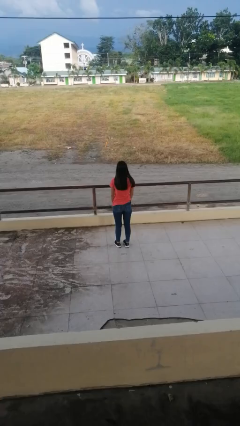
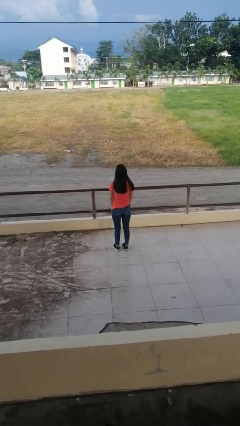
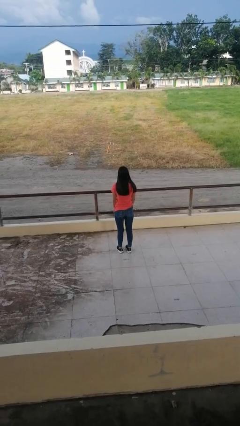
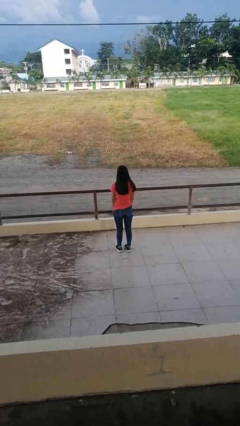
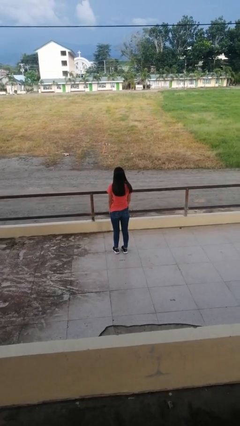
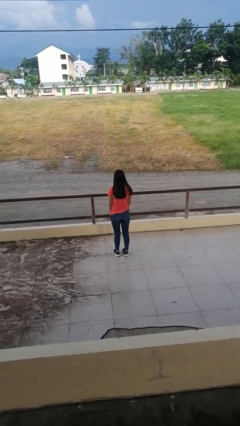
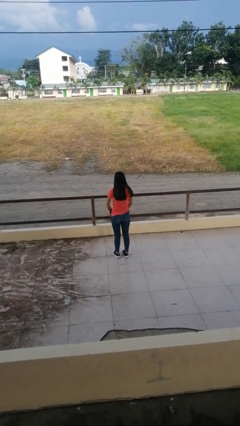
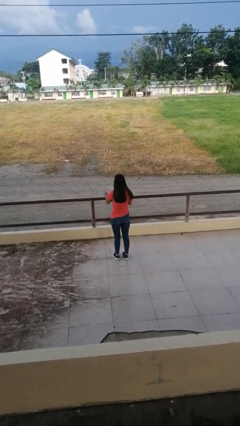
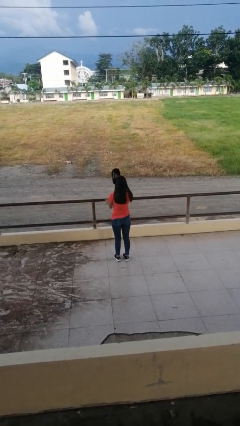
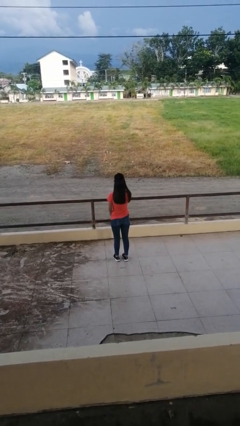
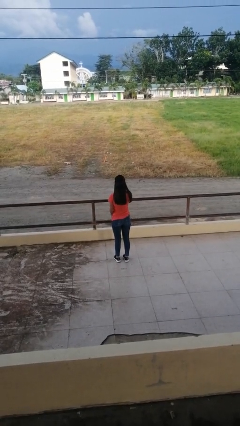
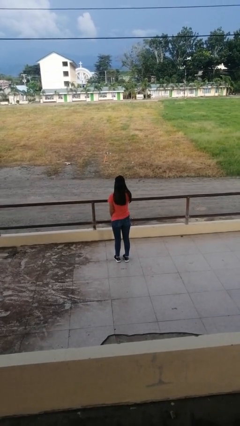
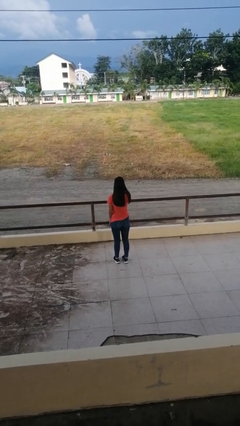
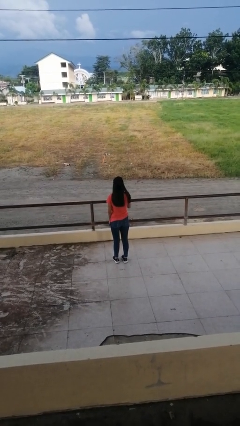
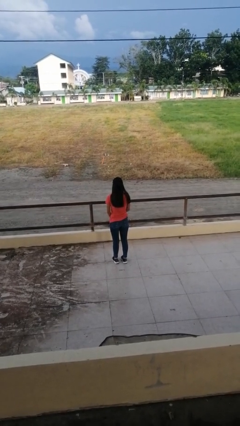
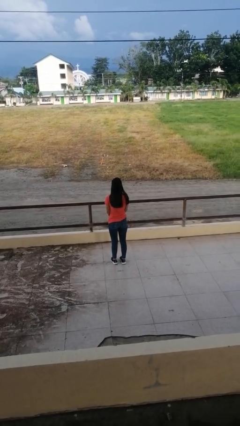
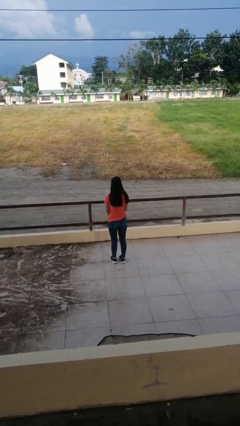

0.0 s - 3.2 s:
person puts on hat

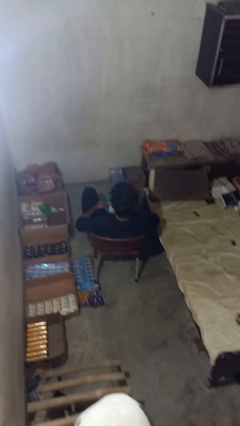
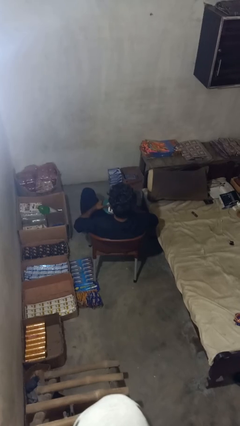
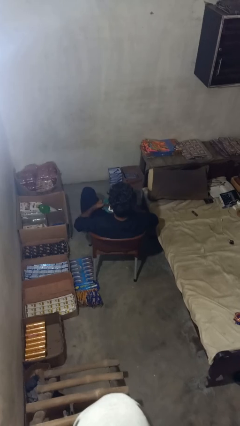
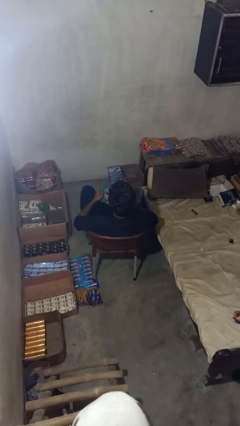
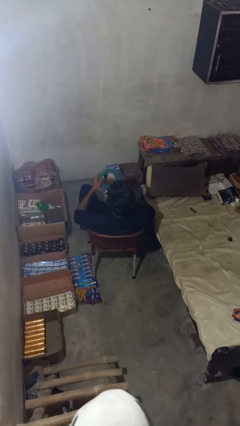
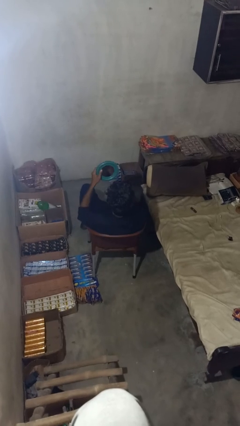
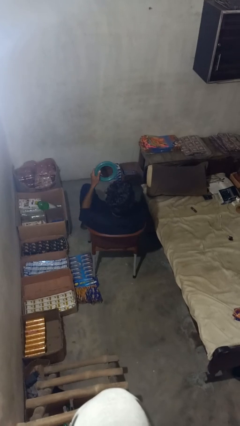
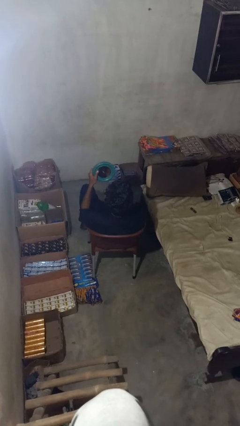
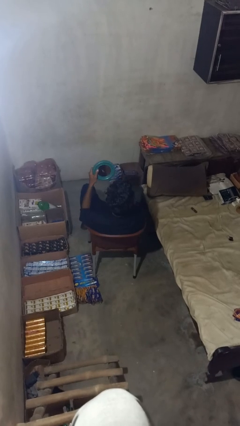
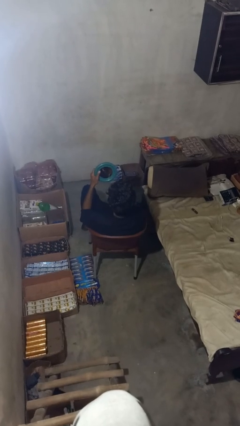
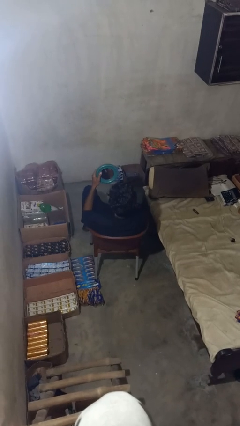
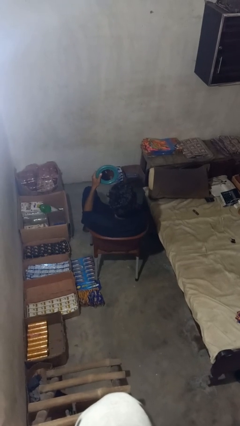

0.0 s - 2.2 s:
person applies foundation makeup

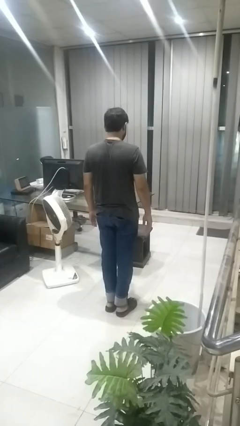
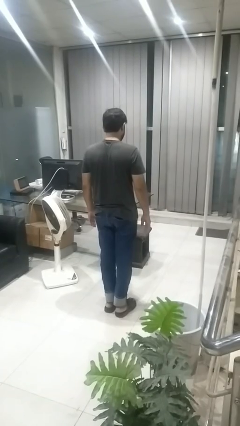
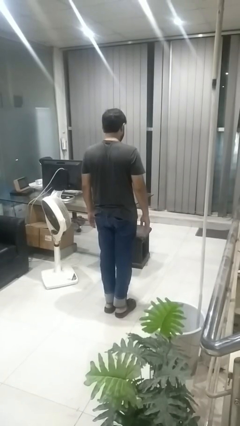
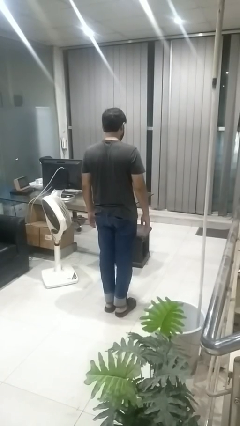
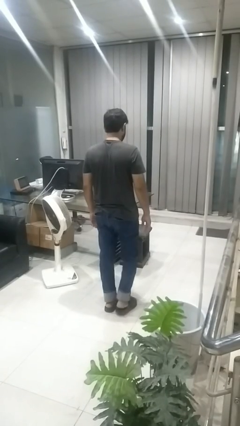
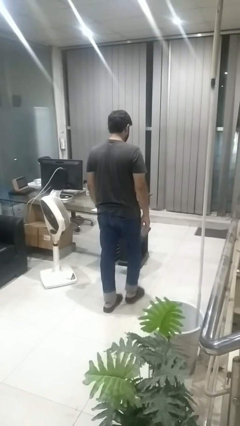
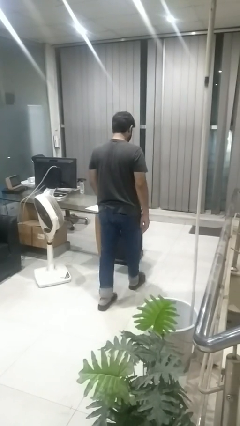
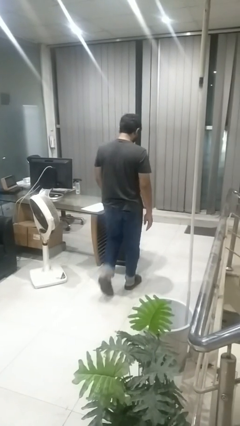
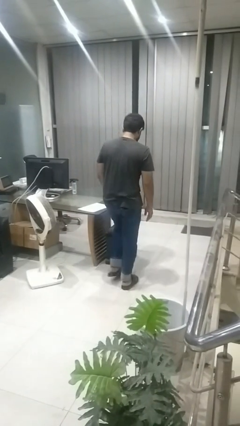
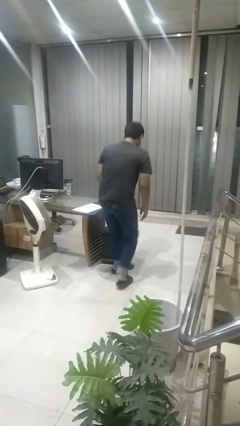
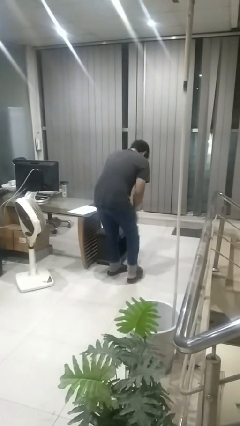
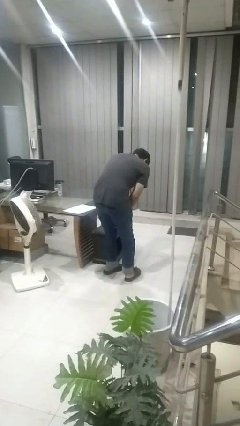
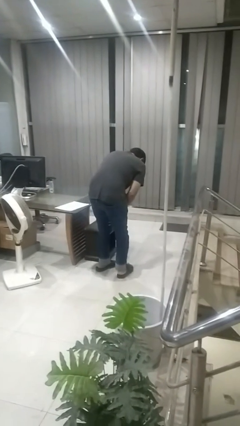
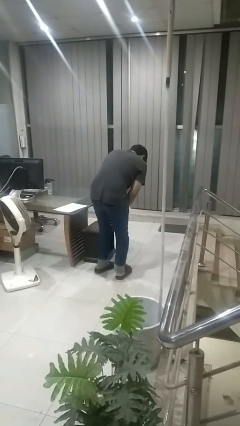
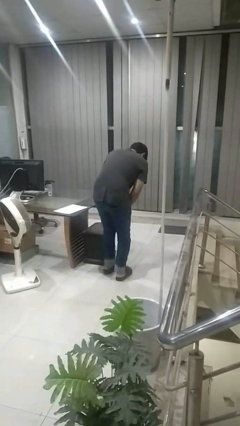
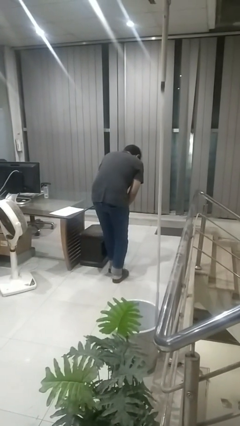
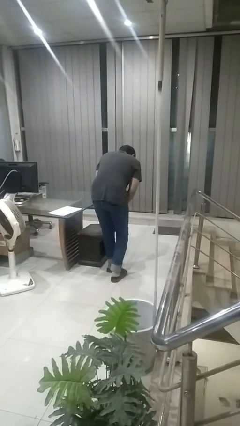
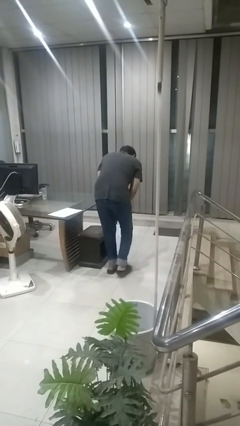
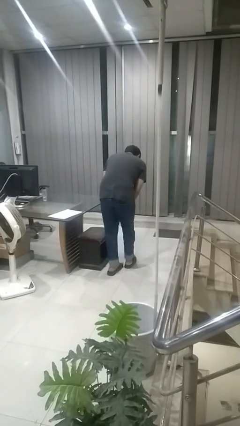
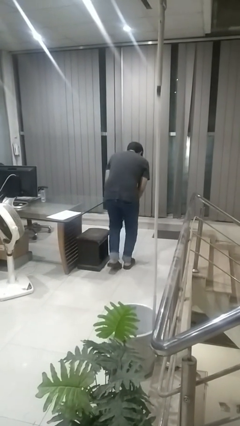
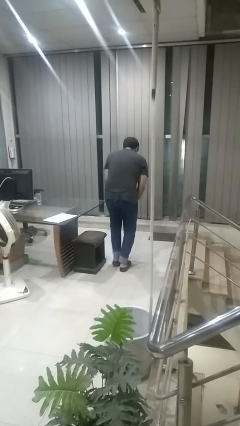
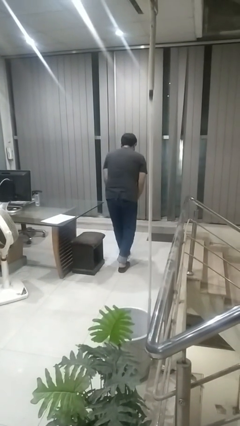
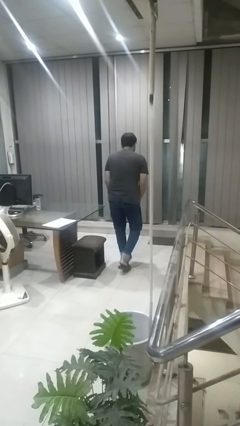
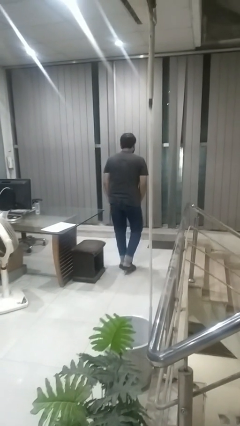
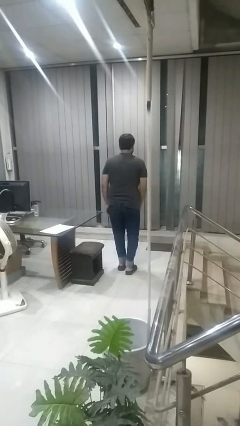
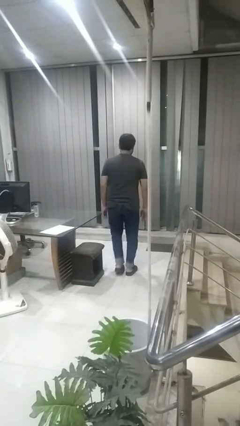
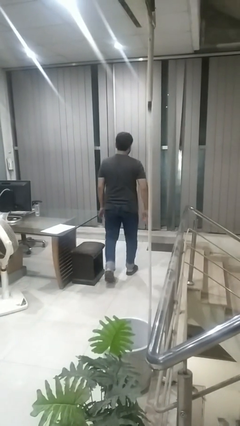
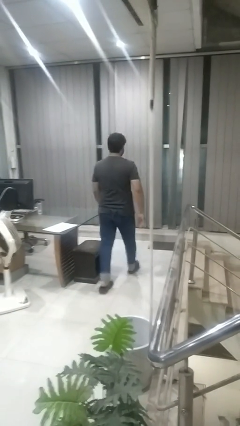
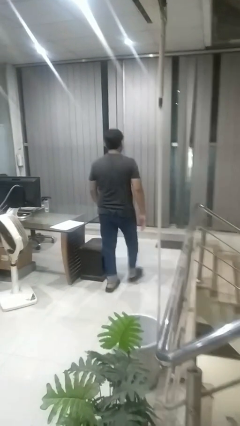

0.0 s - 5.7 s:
person bumps into table

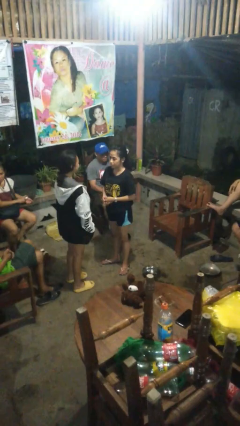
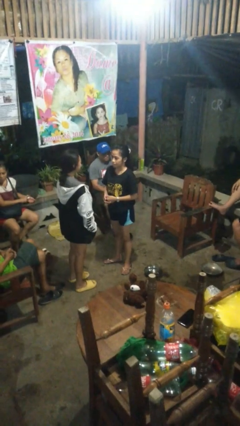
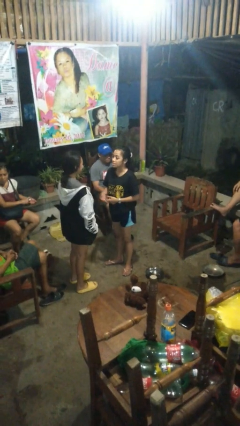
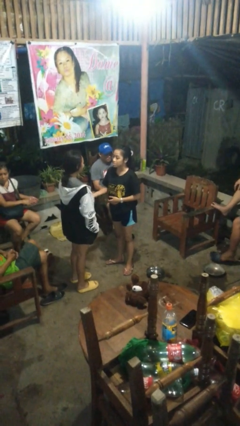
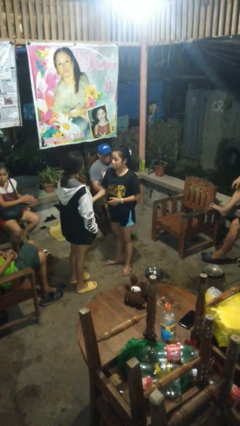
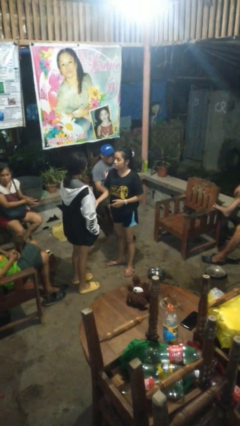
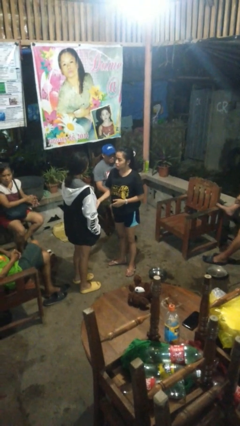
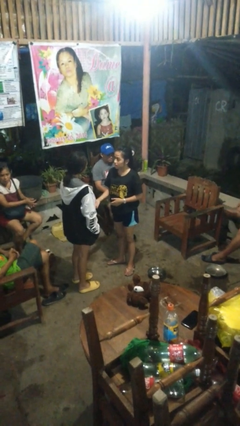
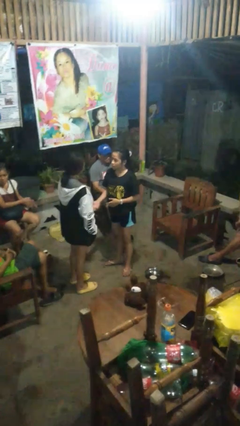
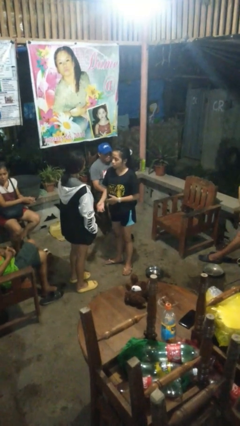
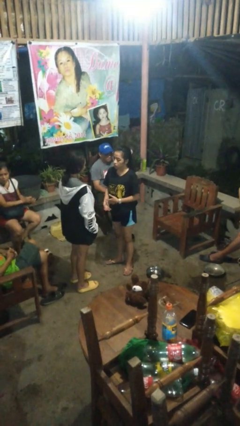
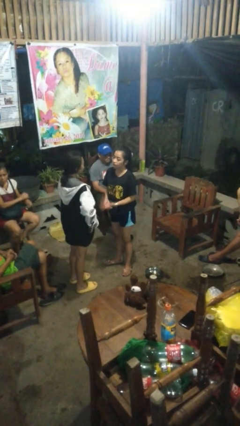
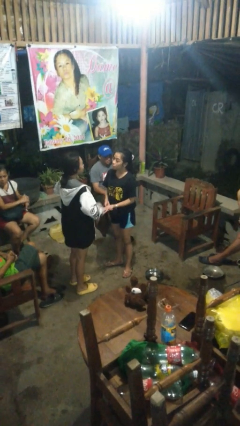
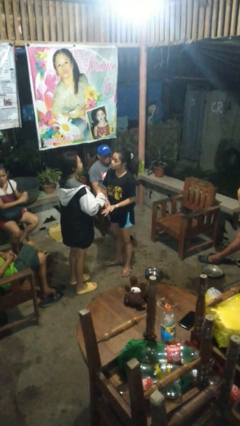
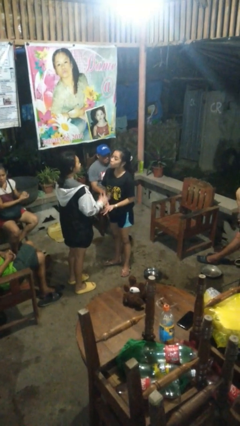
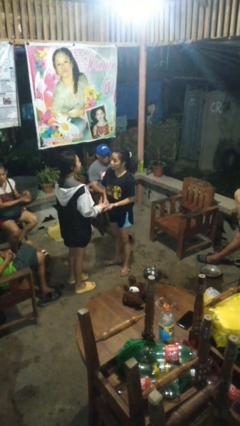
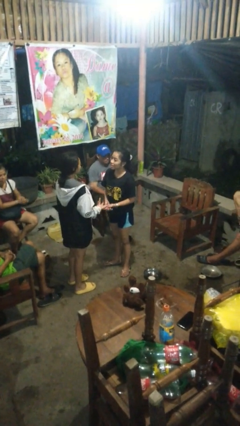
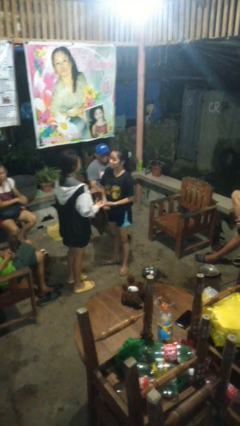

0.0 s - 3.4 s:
person talks to person

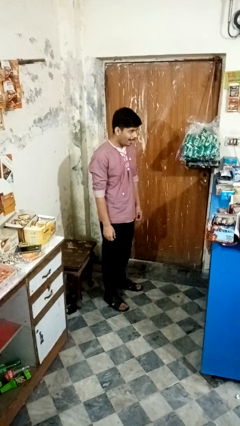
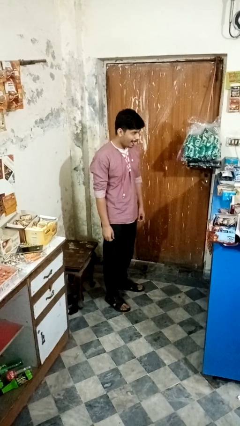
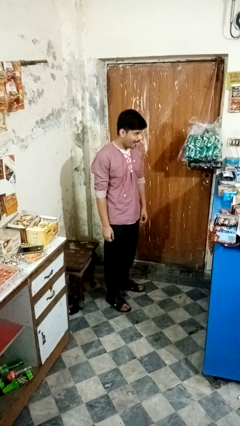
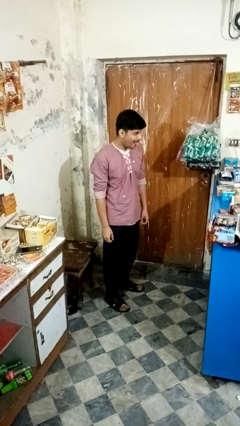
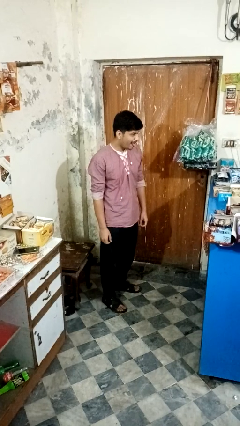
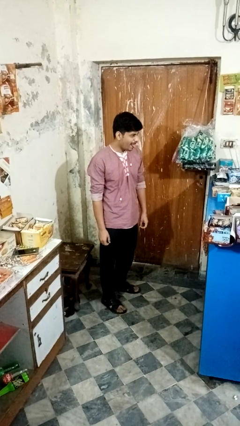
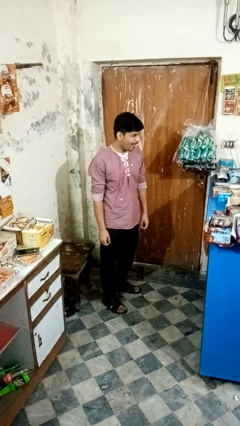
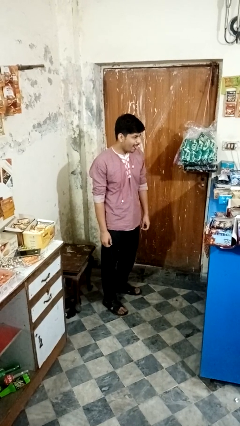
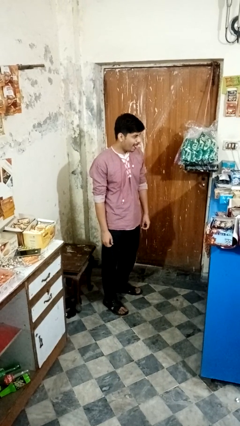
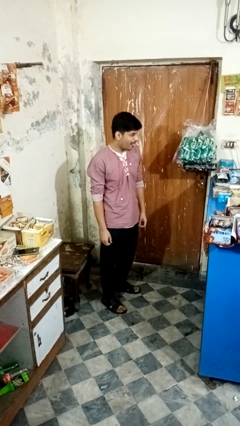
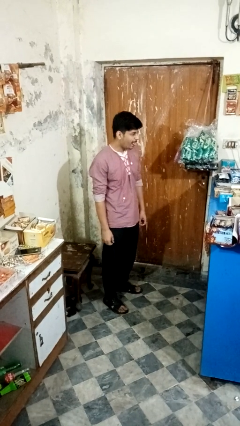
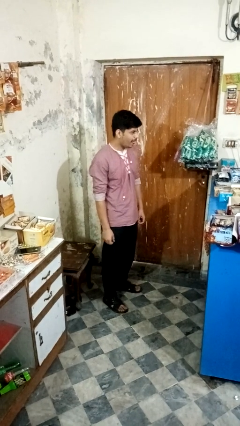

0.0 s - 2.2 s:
person sticks out tongue

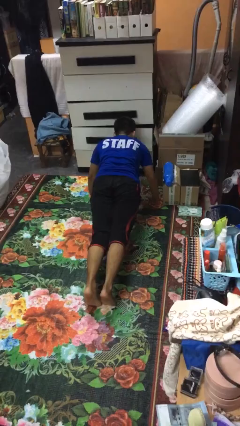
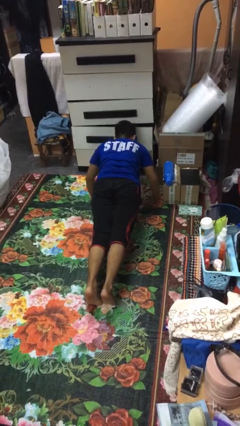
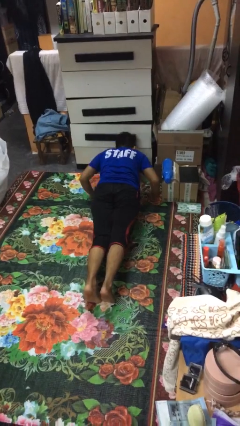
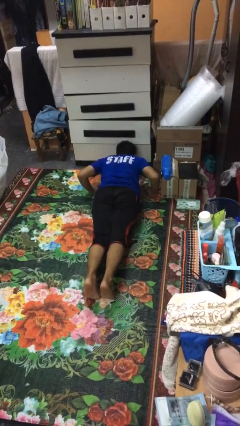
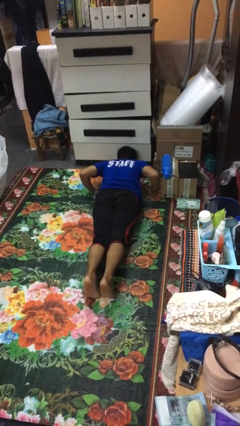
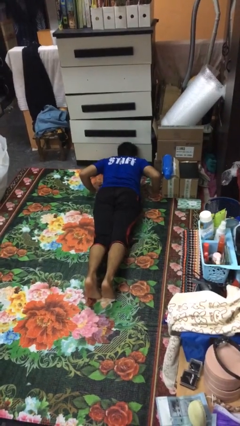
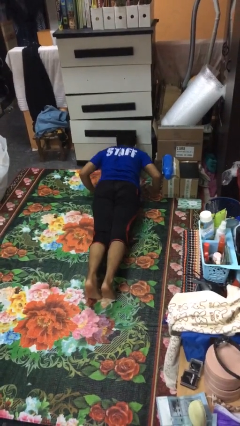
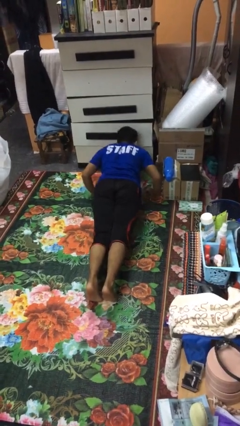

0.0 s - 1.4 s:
person exercises with pushup
